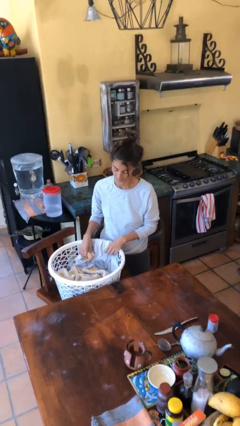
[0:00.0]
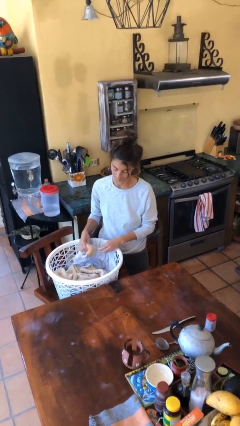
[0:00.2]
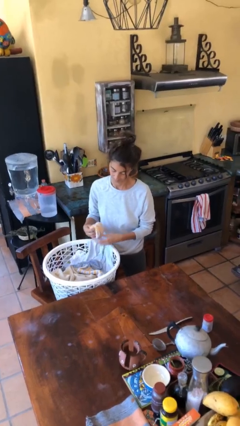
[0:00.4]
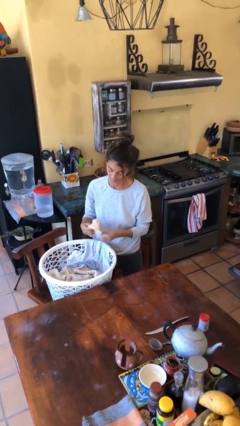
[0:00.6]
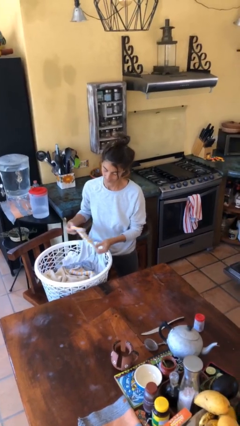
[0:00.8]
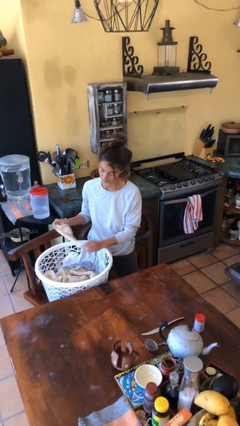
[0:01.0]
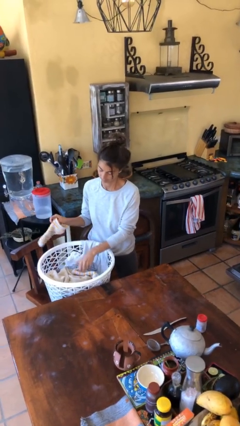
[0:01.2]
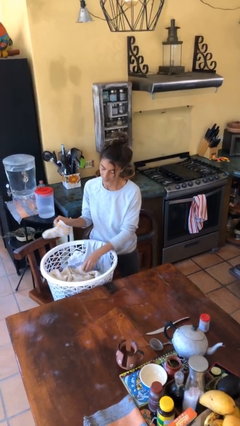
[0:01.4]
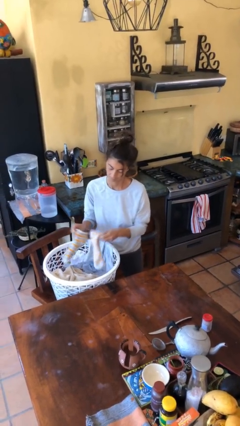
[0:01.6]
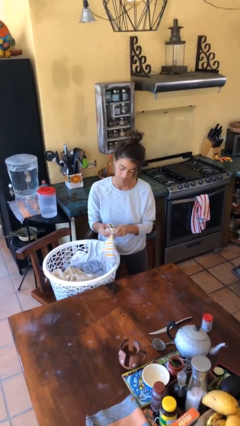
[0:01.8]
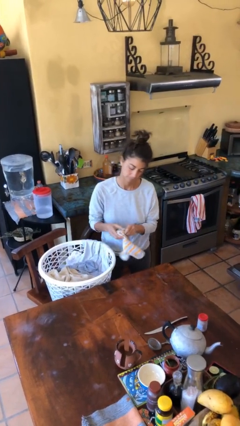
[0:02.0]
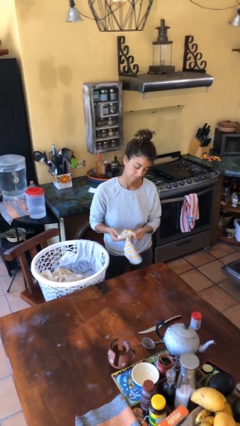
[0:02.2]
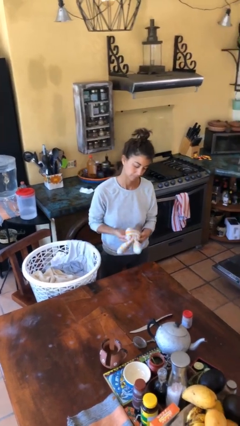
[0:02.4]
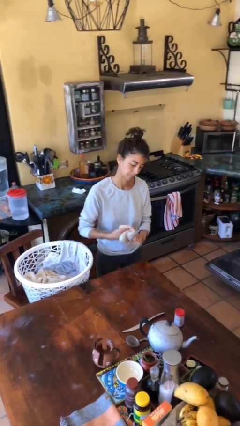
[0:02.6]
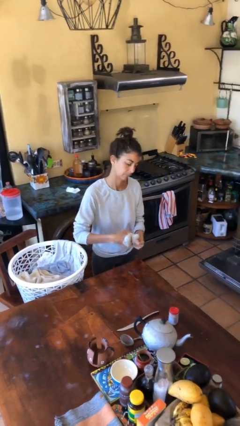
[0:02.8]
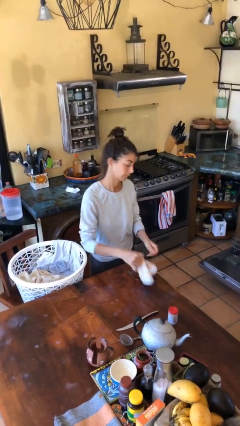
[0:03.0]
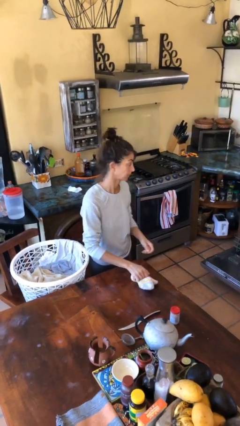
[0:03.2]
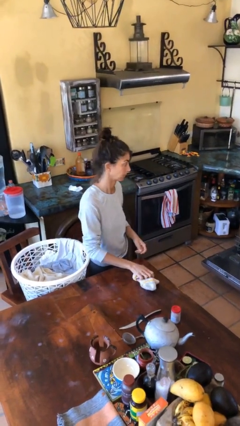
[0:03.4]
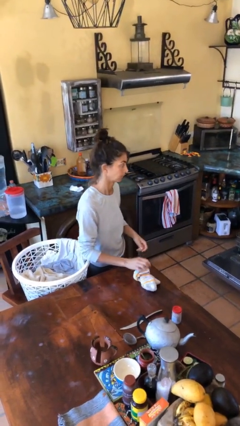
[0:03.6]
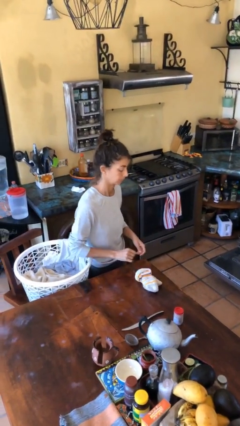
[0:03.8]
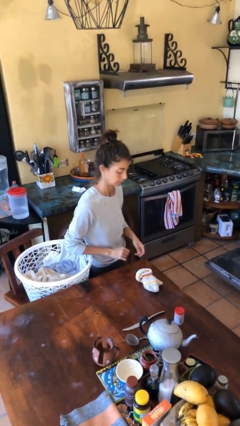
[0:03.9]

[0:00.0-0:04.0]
person folds socks

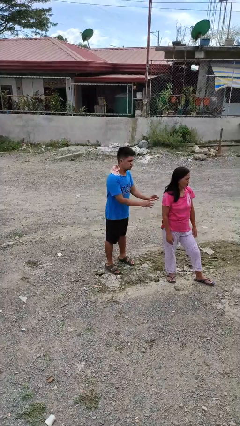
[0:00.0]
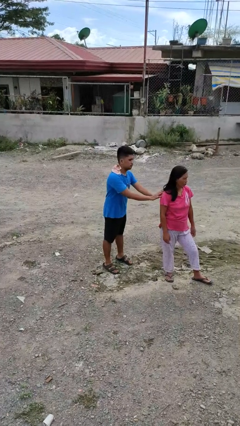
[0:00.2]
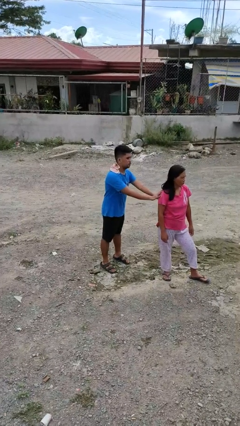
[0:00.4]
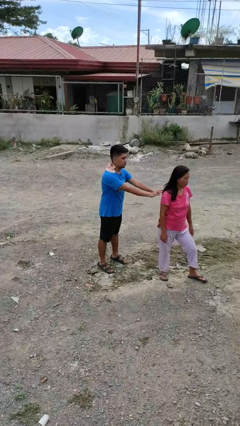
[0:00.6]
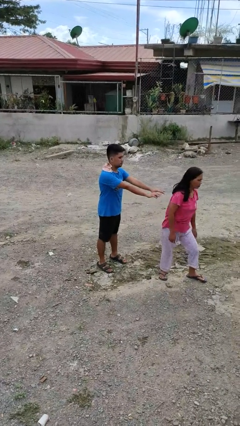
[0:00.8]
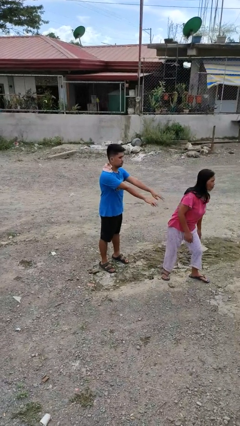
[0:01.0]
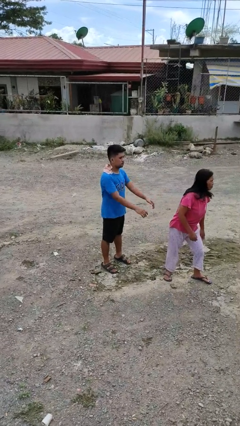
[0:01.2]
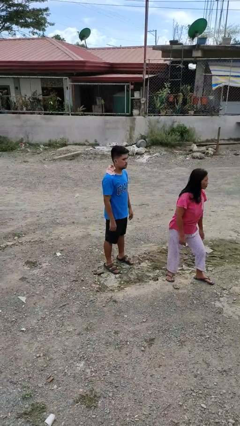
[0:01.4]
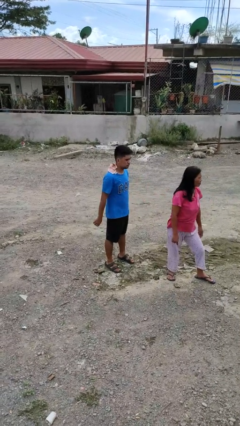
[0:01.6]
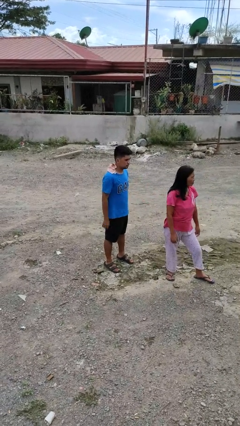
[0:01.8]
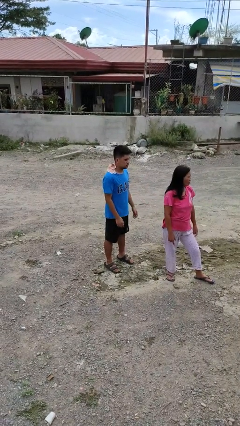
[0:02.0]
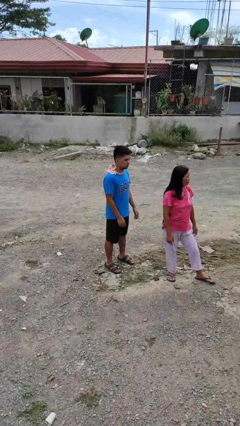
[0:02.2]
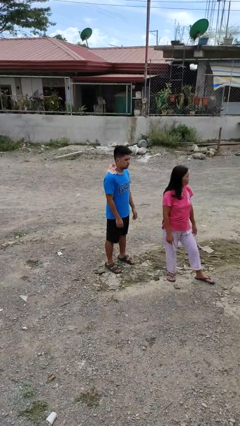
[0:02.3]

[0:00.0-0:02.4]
person shoves person

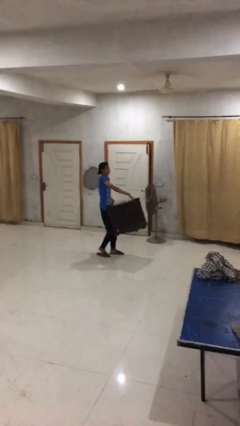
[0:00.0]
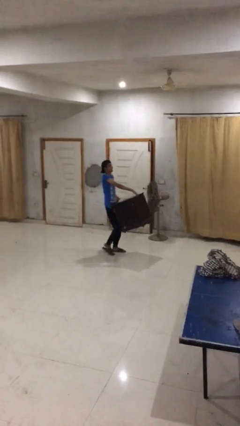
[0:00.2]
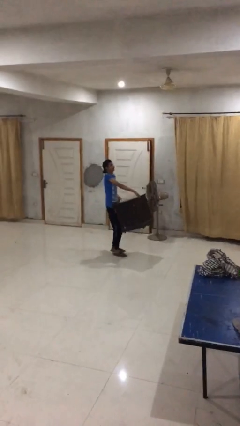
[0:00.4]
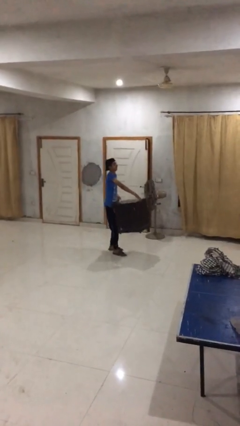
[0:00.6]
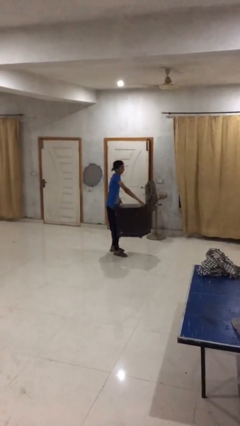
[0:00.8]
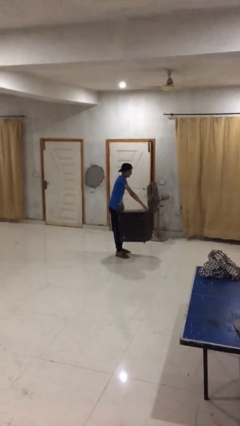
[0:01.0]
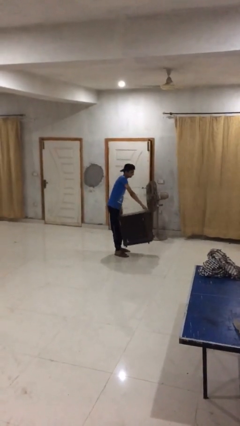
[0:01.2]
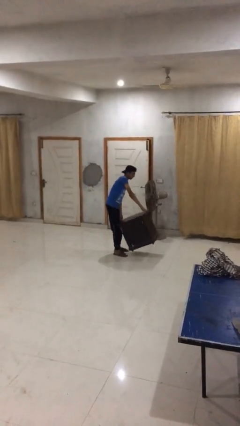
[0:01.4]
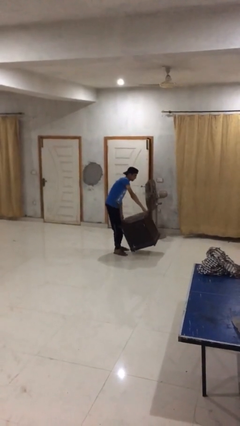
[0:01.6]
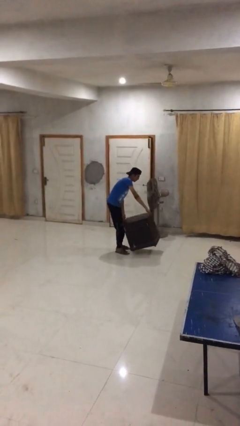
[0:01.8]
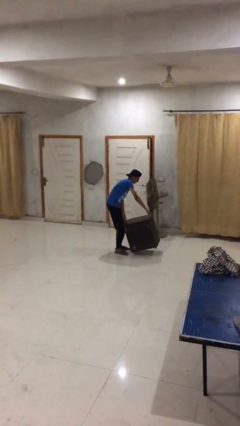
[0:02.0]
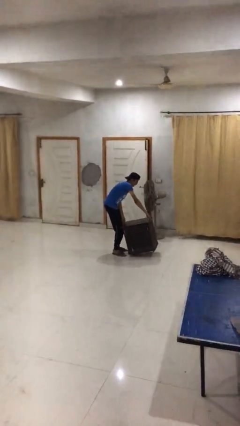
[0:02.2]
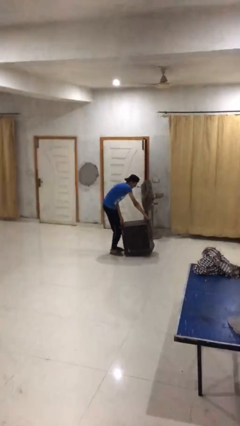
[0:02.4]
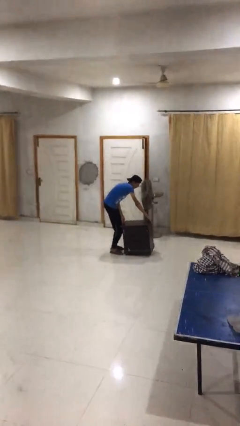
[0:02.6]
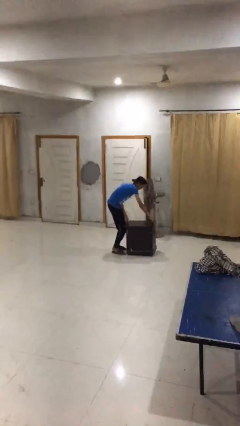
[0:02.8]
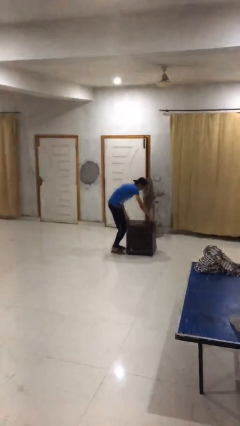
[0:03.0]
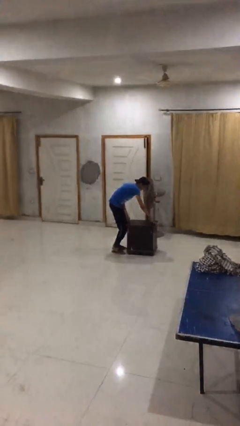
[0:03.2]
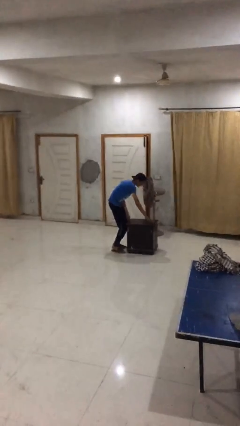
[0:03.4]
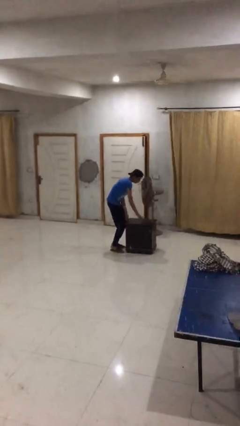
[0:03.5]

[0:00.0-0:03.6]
person puts down object on floor

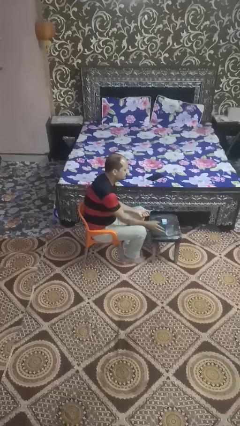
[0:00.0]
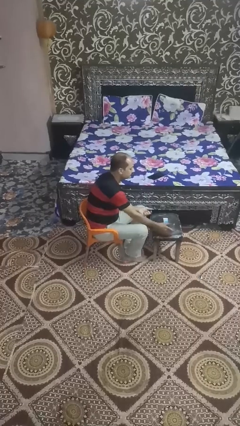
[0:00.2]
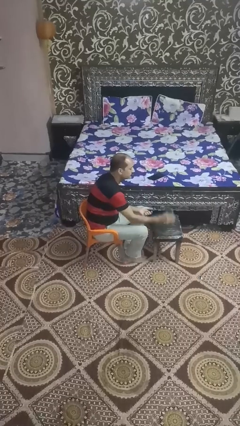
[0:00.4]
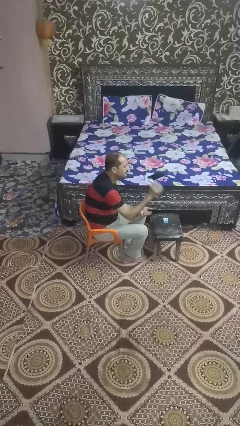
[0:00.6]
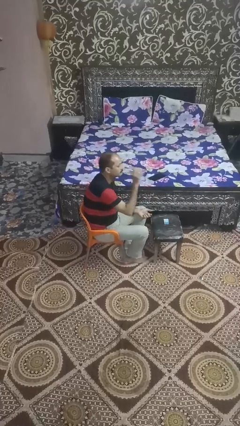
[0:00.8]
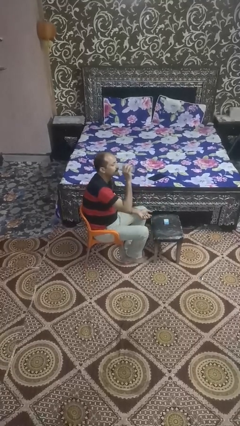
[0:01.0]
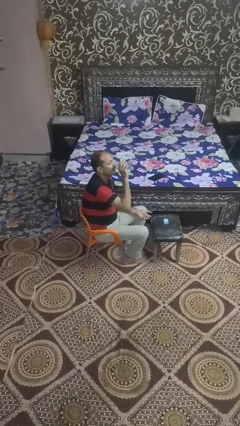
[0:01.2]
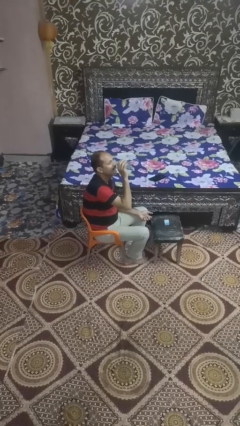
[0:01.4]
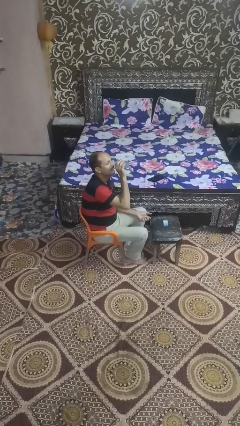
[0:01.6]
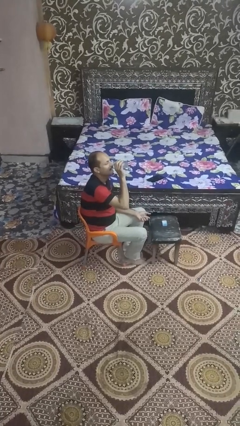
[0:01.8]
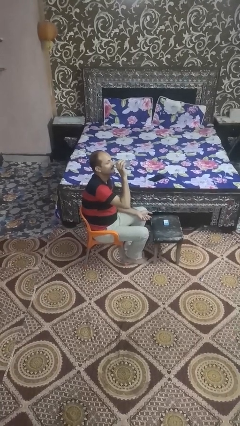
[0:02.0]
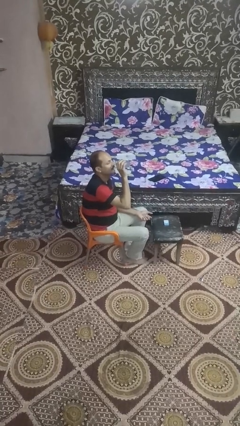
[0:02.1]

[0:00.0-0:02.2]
person sets upright glass

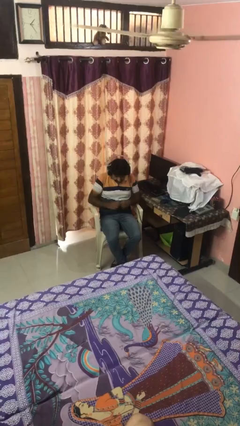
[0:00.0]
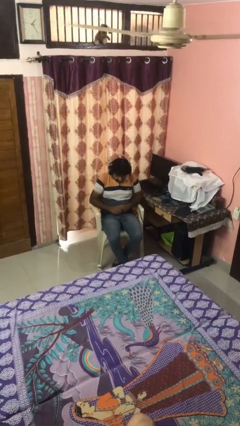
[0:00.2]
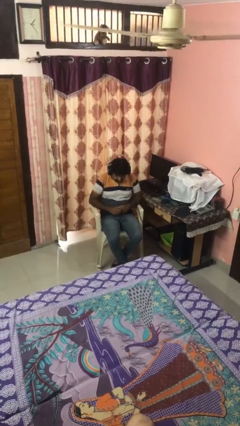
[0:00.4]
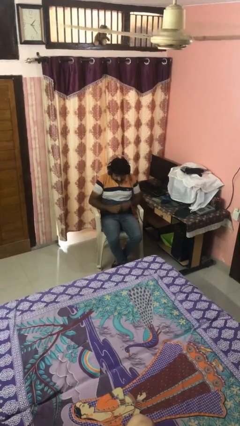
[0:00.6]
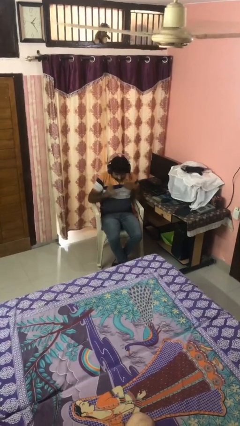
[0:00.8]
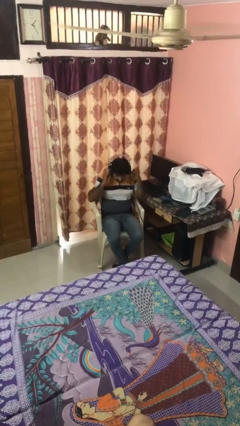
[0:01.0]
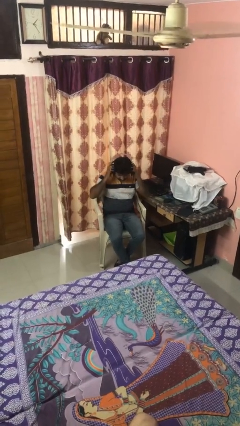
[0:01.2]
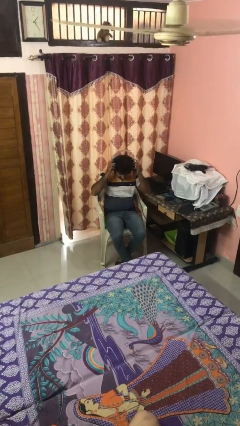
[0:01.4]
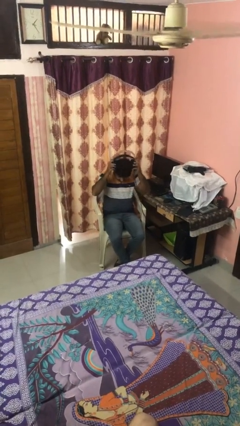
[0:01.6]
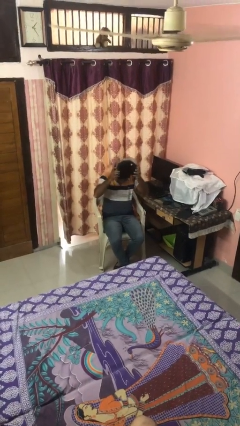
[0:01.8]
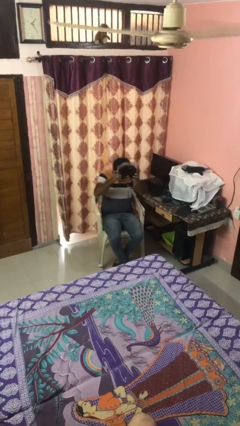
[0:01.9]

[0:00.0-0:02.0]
person takes off headphones

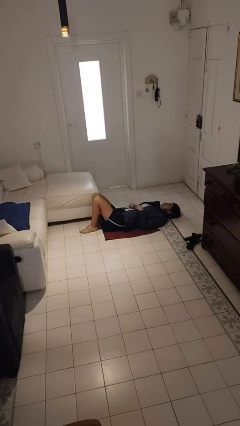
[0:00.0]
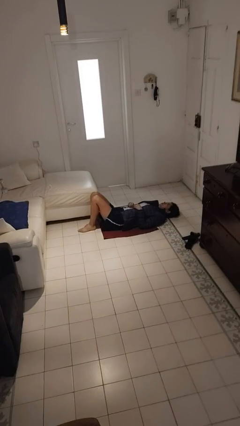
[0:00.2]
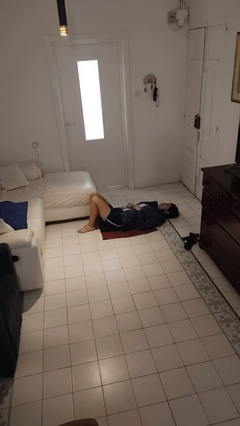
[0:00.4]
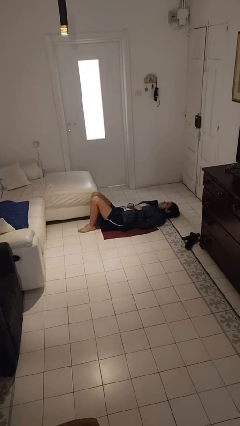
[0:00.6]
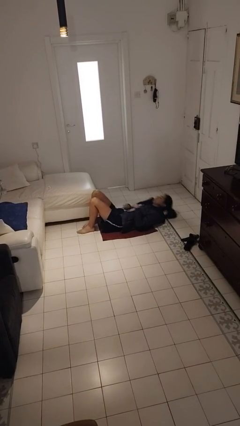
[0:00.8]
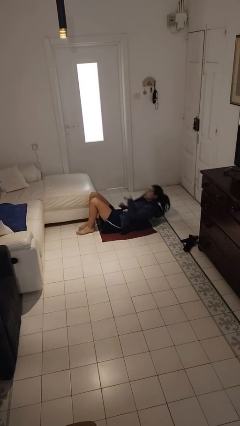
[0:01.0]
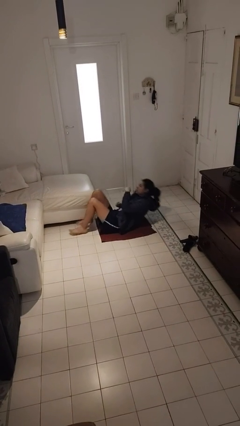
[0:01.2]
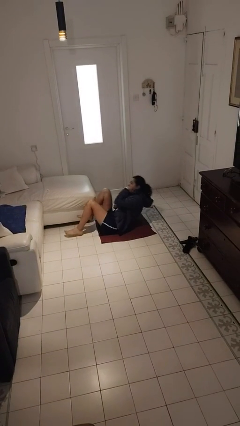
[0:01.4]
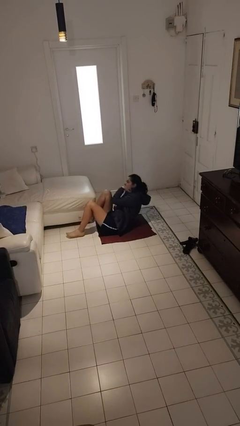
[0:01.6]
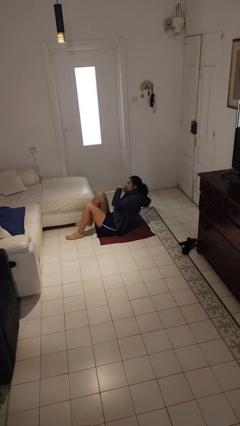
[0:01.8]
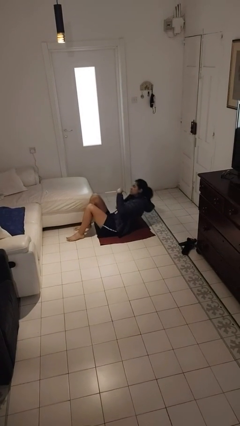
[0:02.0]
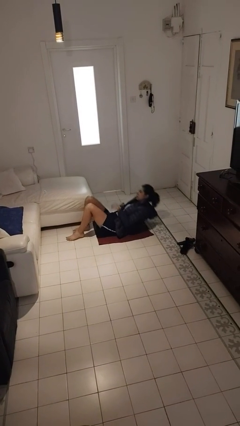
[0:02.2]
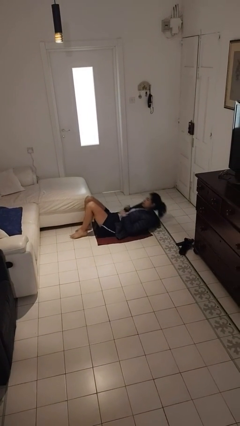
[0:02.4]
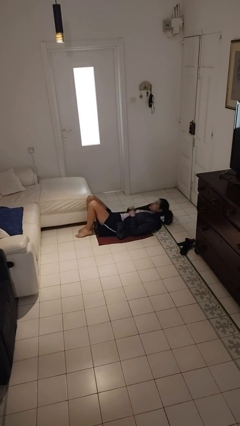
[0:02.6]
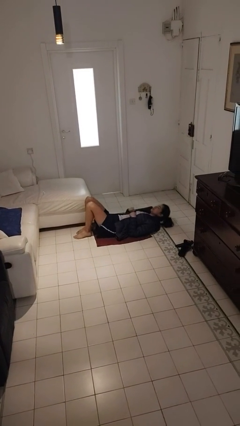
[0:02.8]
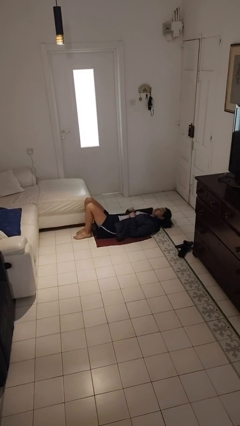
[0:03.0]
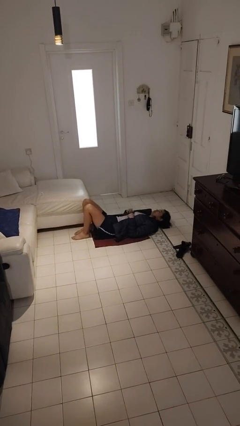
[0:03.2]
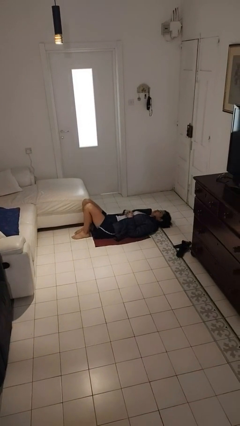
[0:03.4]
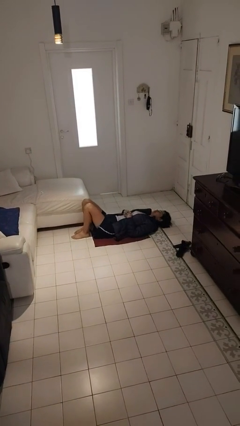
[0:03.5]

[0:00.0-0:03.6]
person exercises with situp
